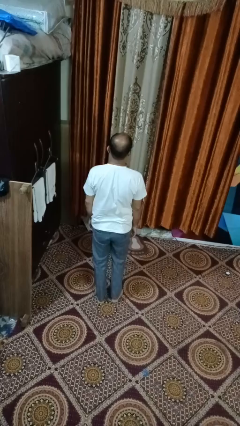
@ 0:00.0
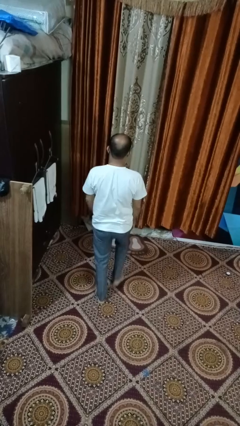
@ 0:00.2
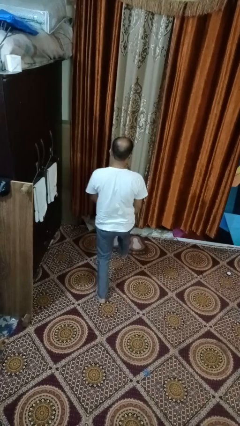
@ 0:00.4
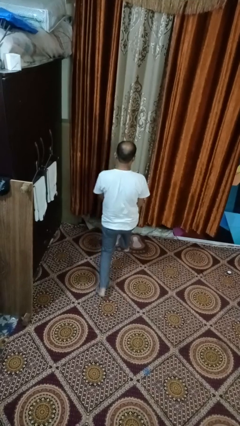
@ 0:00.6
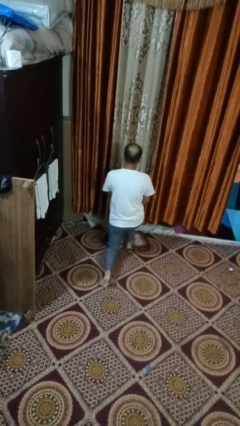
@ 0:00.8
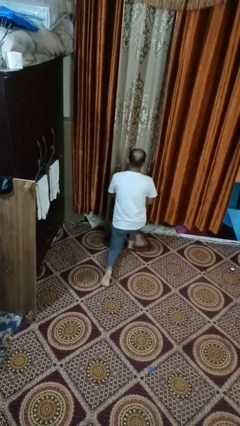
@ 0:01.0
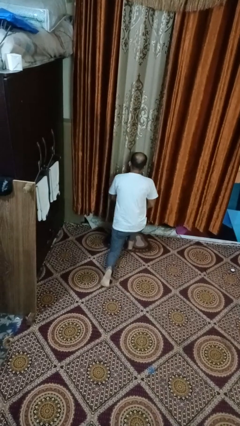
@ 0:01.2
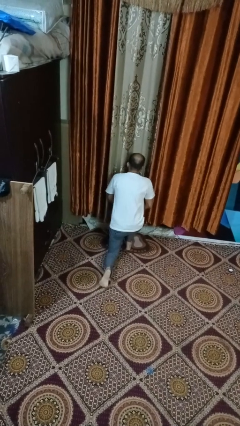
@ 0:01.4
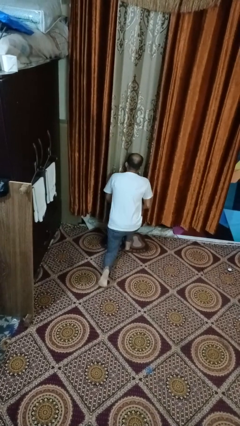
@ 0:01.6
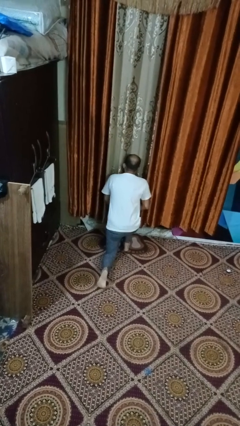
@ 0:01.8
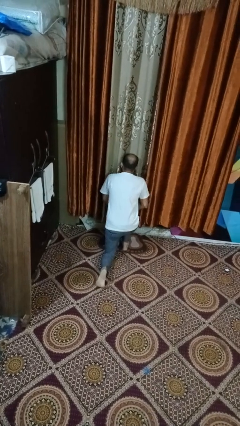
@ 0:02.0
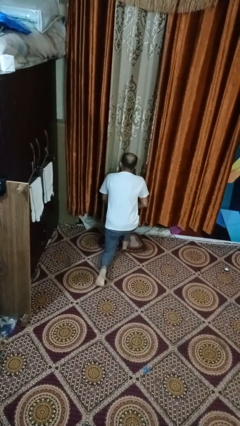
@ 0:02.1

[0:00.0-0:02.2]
person kneels

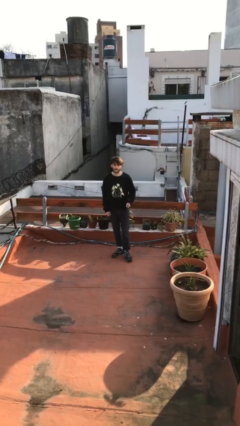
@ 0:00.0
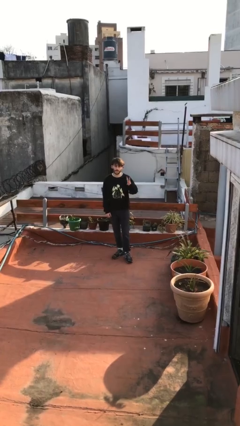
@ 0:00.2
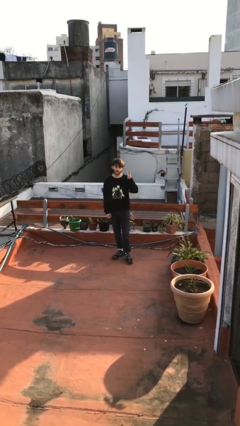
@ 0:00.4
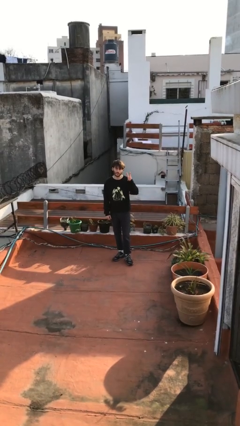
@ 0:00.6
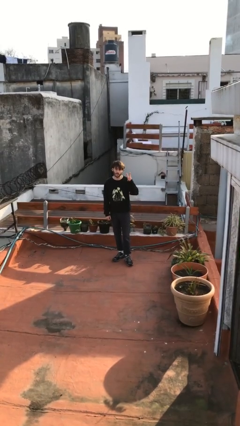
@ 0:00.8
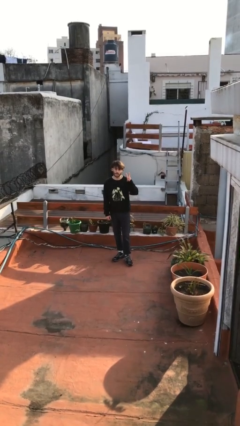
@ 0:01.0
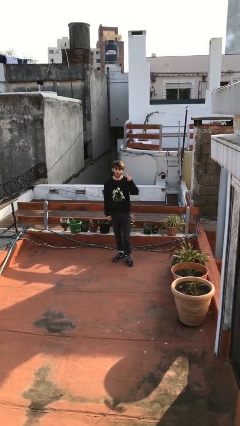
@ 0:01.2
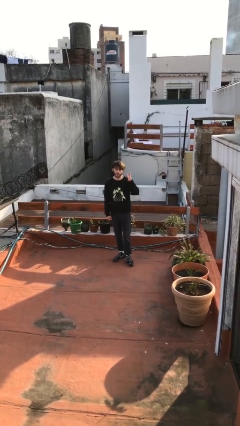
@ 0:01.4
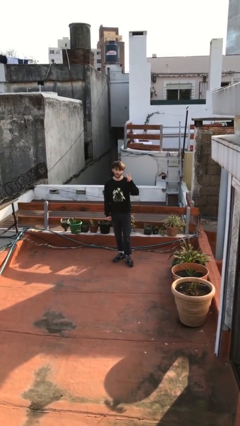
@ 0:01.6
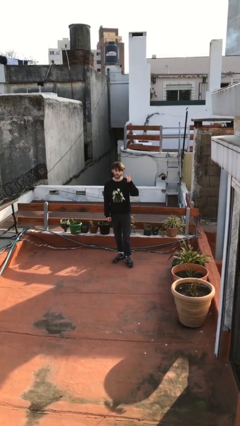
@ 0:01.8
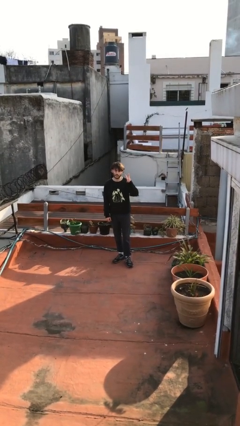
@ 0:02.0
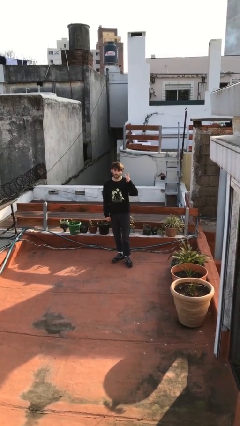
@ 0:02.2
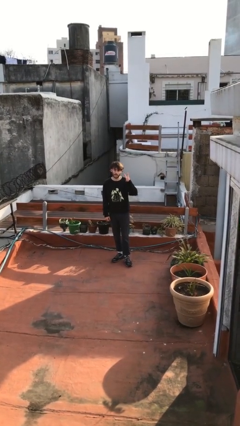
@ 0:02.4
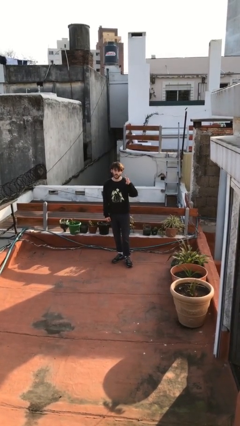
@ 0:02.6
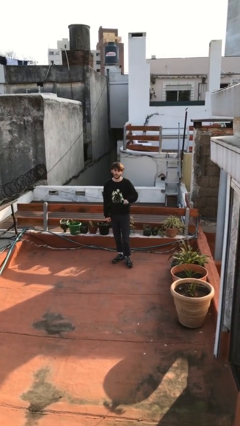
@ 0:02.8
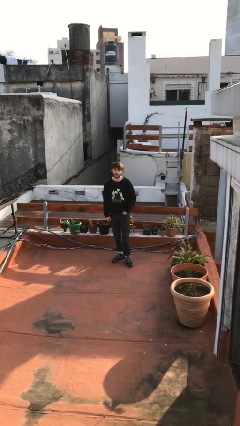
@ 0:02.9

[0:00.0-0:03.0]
person gestures peace

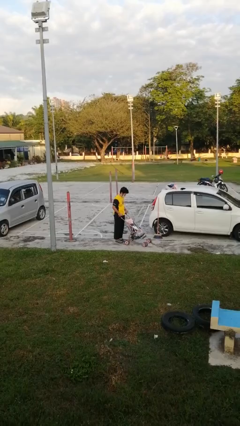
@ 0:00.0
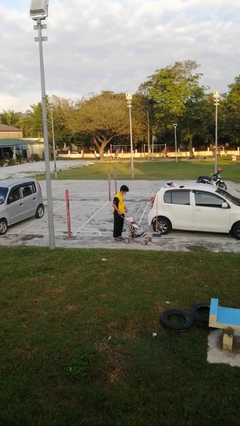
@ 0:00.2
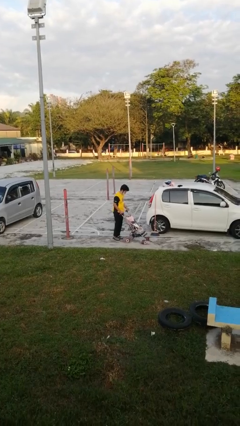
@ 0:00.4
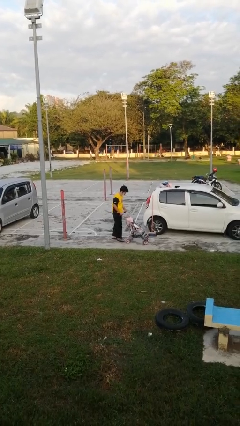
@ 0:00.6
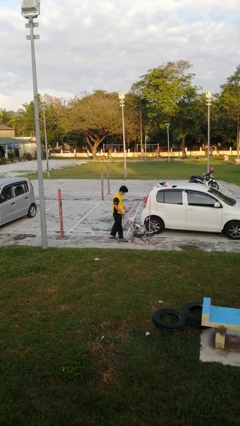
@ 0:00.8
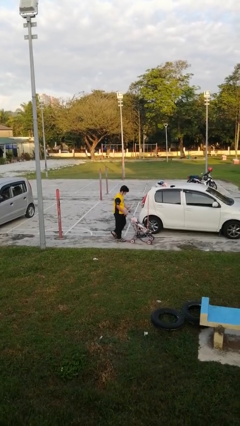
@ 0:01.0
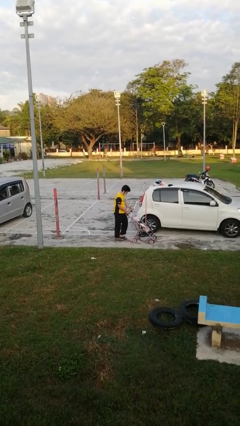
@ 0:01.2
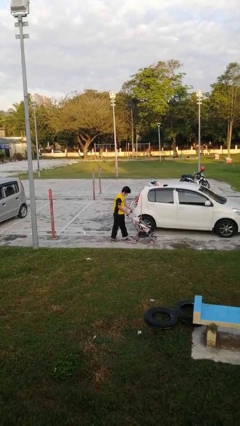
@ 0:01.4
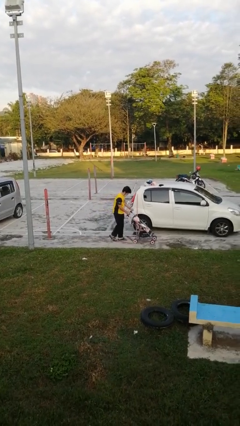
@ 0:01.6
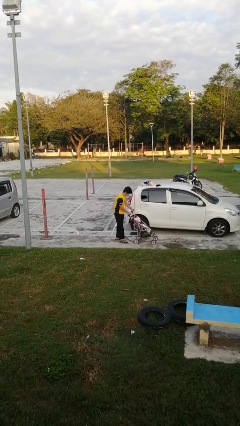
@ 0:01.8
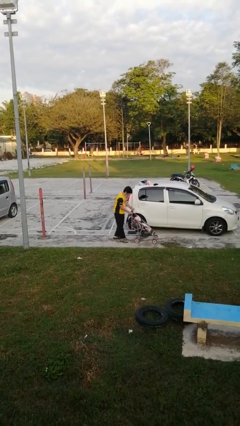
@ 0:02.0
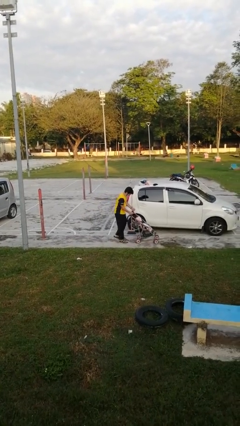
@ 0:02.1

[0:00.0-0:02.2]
person pushes wheeled cart

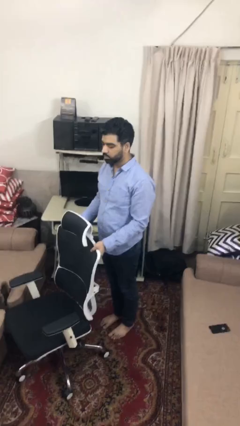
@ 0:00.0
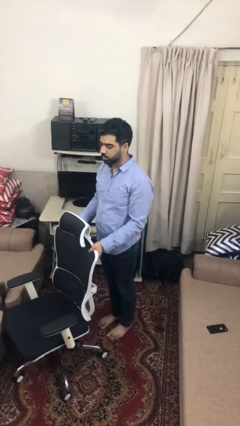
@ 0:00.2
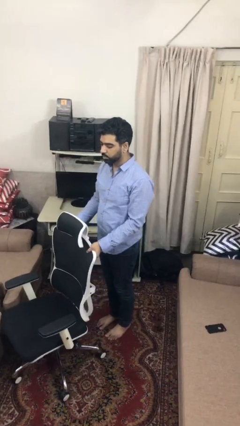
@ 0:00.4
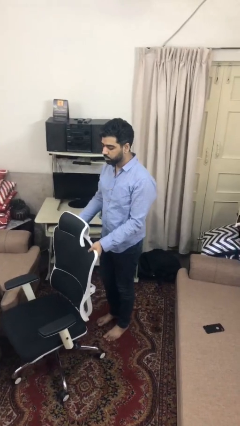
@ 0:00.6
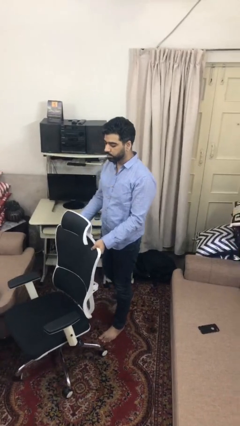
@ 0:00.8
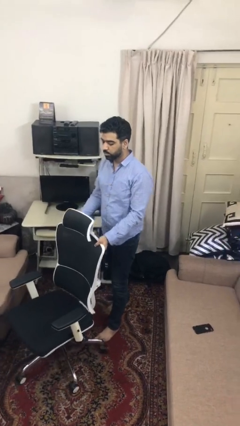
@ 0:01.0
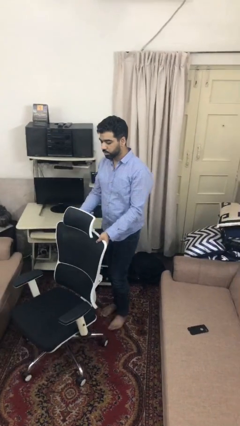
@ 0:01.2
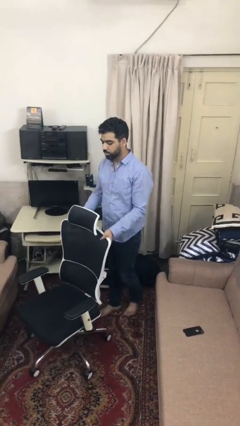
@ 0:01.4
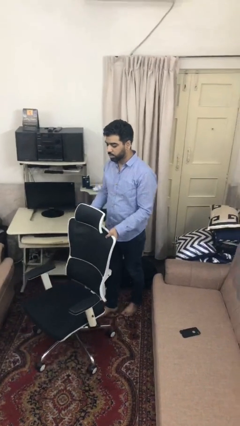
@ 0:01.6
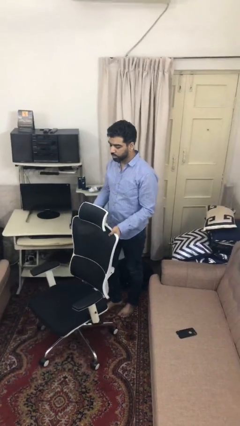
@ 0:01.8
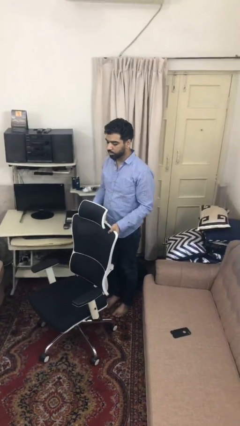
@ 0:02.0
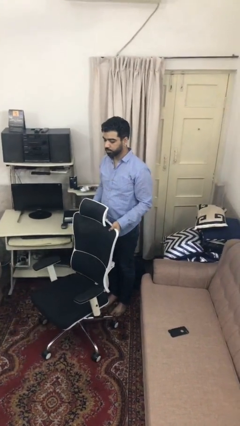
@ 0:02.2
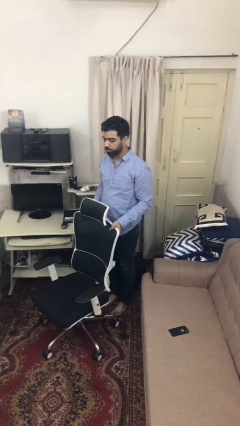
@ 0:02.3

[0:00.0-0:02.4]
person pulls wheeled cart

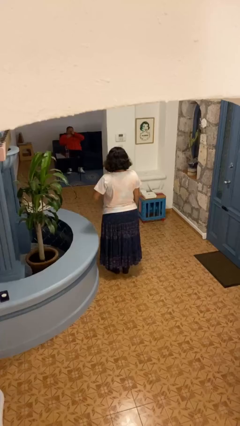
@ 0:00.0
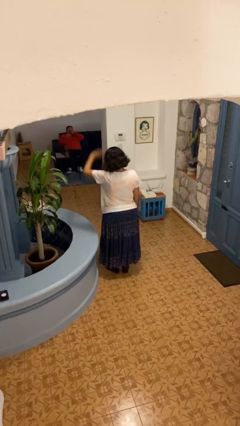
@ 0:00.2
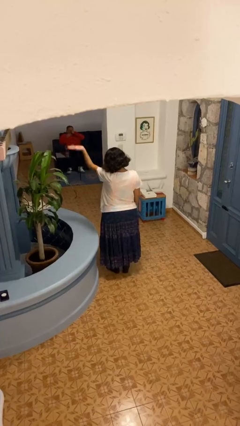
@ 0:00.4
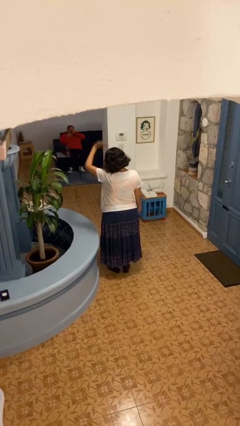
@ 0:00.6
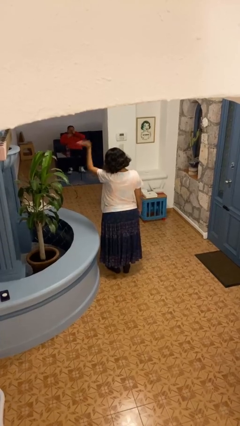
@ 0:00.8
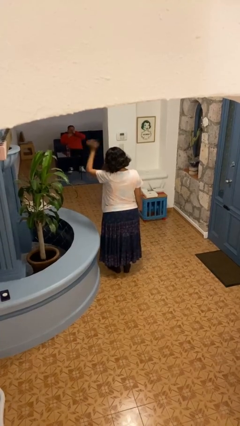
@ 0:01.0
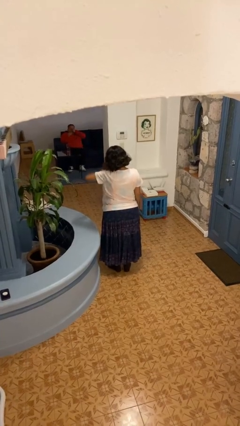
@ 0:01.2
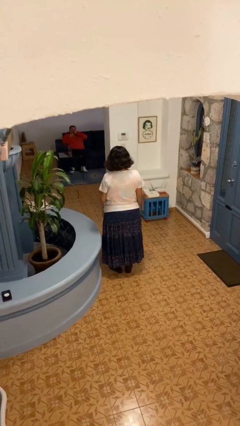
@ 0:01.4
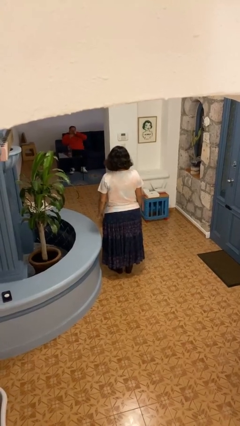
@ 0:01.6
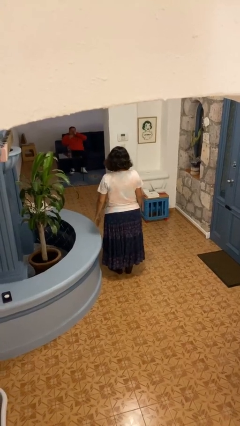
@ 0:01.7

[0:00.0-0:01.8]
person waves at person

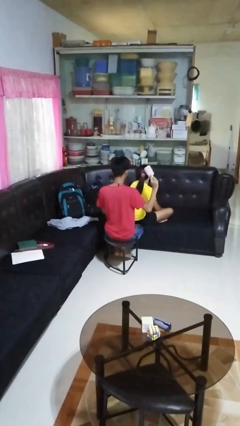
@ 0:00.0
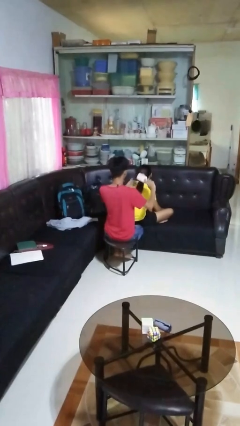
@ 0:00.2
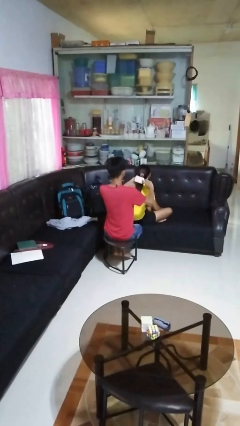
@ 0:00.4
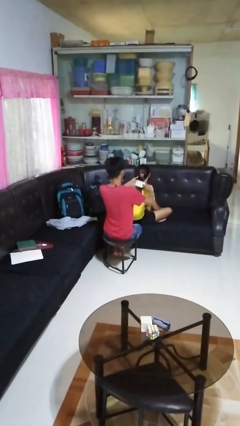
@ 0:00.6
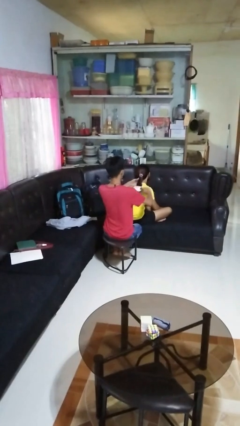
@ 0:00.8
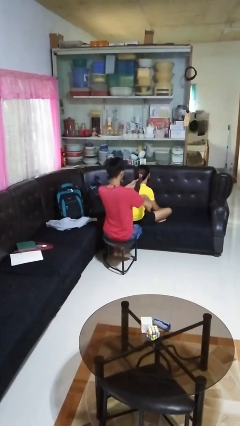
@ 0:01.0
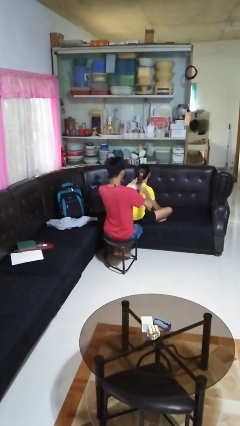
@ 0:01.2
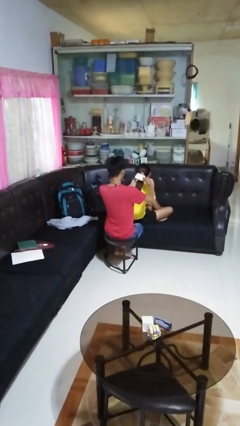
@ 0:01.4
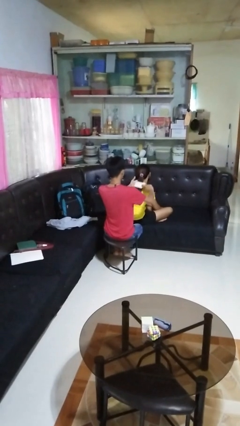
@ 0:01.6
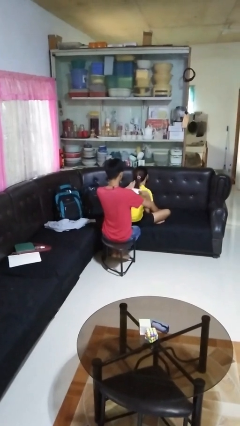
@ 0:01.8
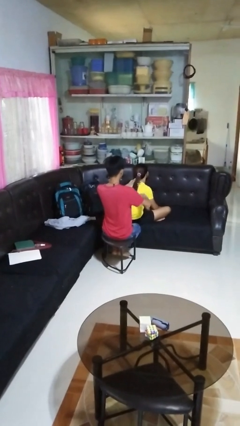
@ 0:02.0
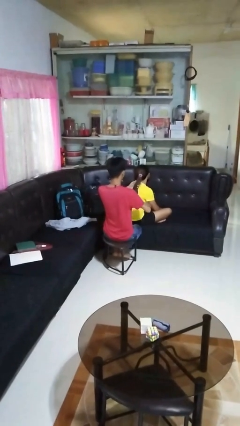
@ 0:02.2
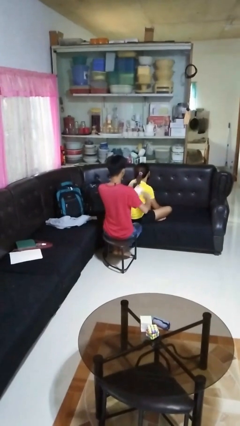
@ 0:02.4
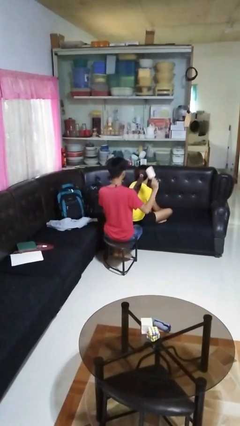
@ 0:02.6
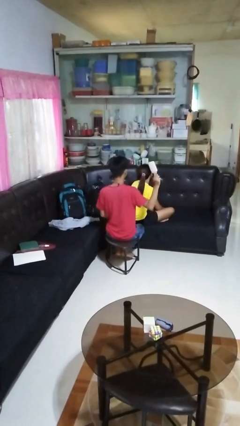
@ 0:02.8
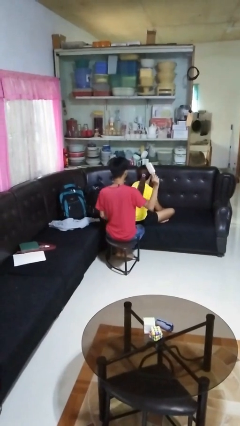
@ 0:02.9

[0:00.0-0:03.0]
person brushes hair of person

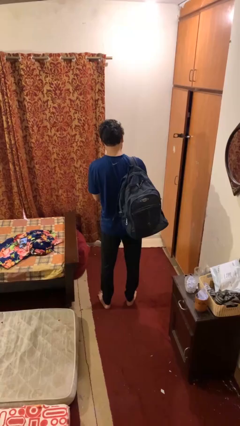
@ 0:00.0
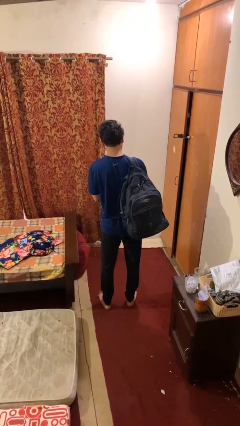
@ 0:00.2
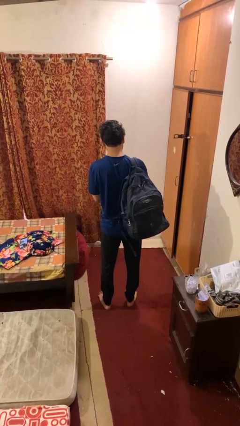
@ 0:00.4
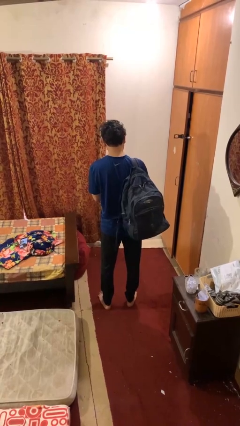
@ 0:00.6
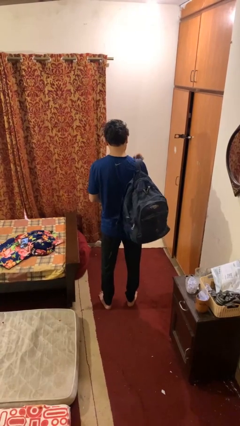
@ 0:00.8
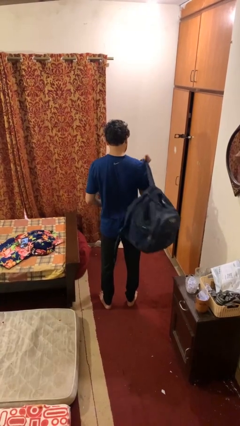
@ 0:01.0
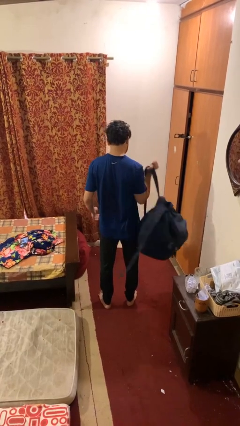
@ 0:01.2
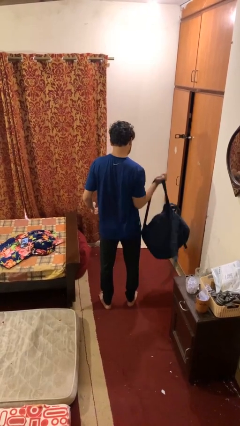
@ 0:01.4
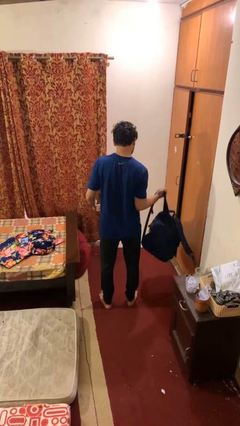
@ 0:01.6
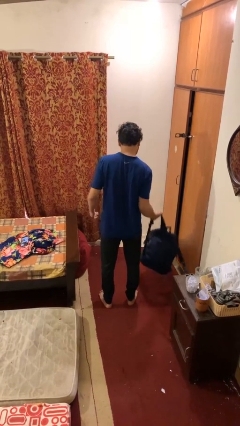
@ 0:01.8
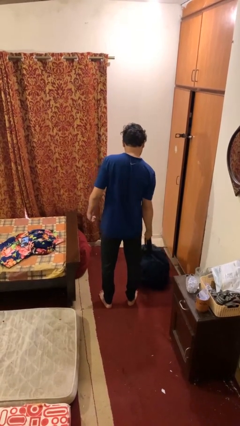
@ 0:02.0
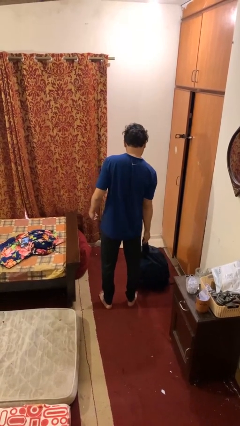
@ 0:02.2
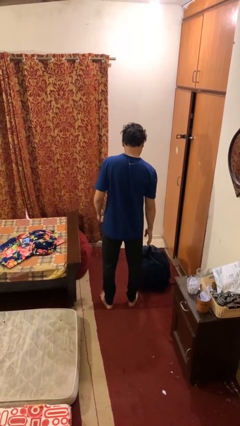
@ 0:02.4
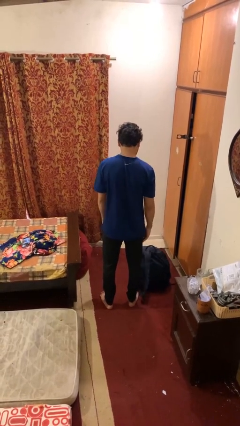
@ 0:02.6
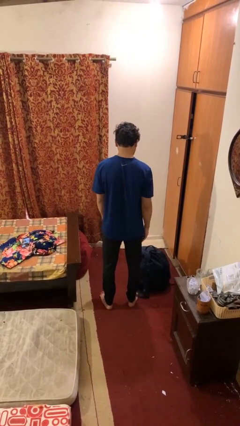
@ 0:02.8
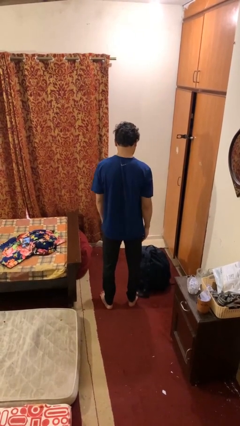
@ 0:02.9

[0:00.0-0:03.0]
person takes off backpack
